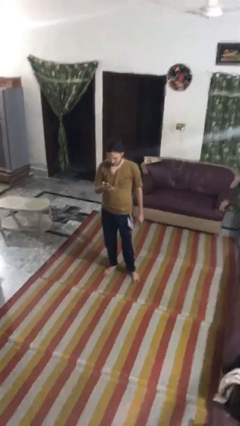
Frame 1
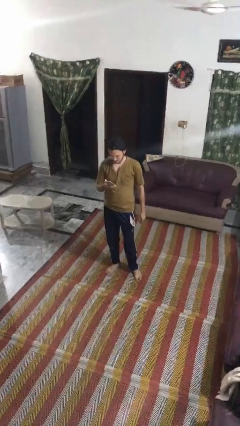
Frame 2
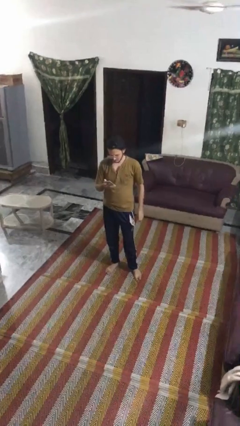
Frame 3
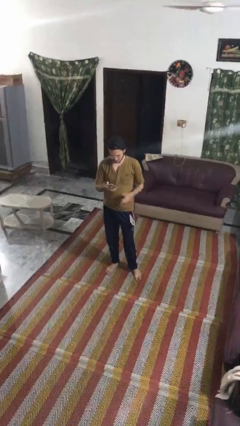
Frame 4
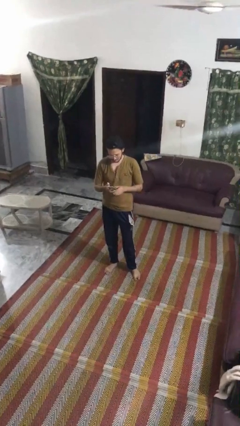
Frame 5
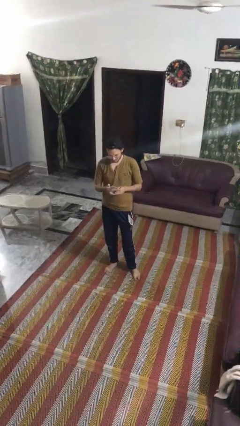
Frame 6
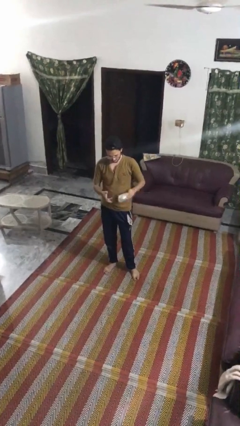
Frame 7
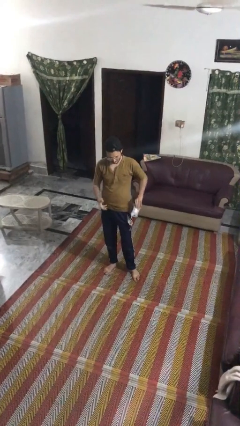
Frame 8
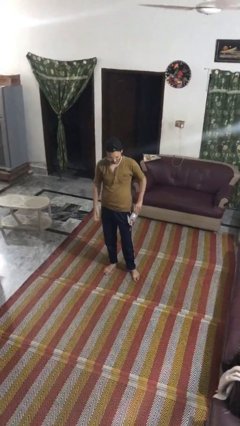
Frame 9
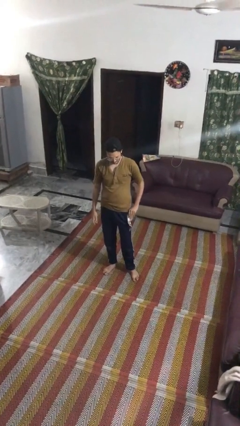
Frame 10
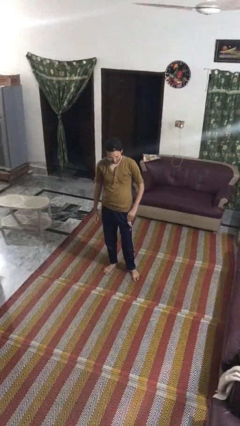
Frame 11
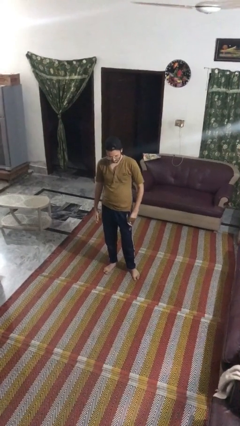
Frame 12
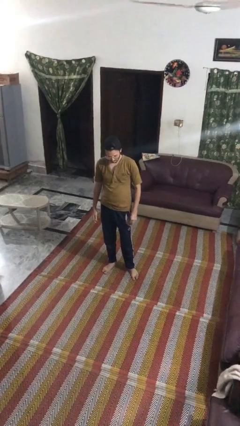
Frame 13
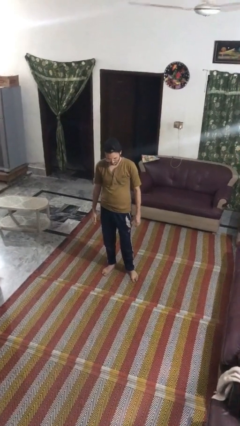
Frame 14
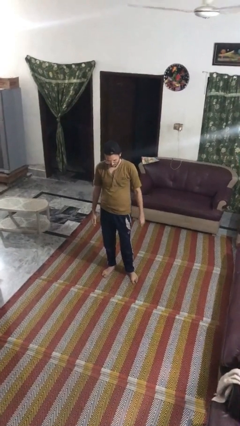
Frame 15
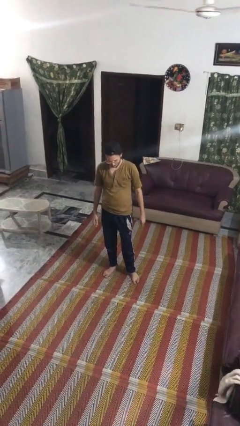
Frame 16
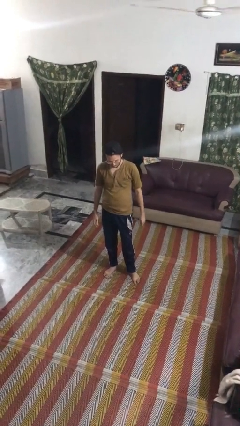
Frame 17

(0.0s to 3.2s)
person puts phone into pocket

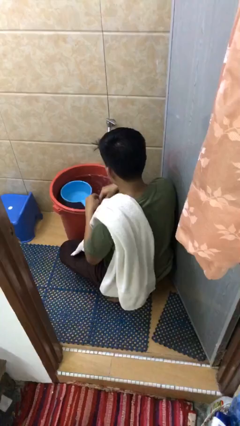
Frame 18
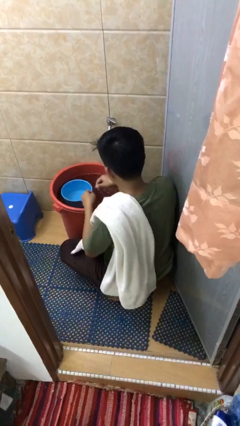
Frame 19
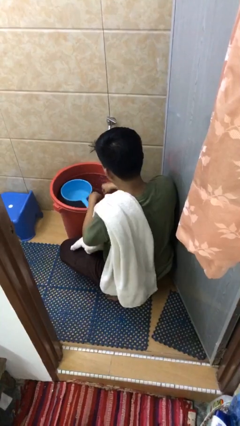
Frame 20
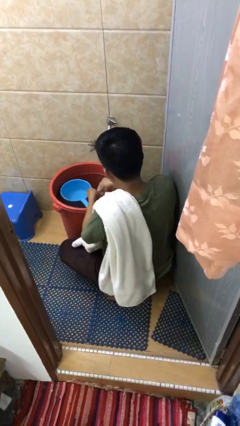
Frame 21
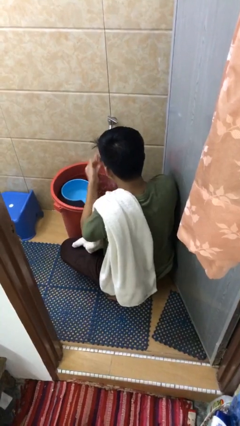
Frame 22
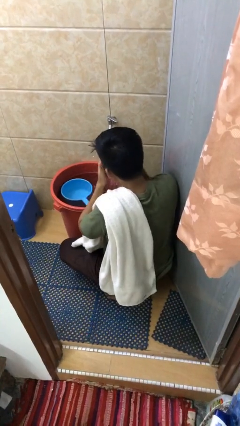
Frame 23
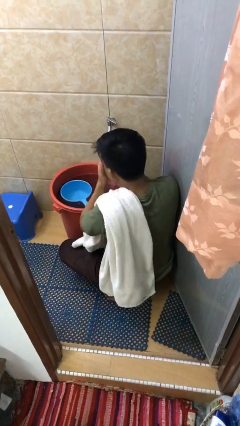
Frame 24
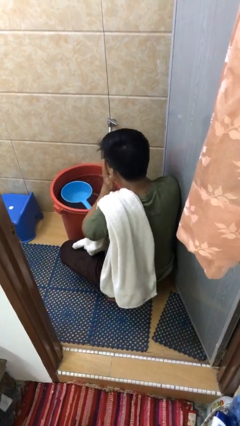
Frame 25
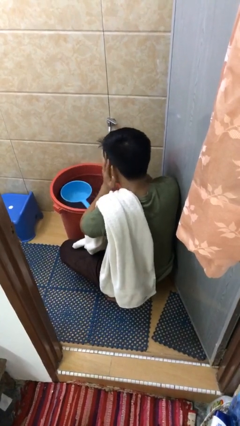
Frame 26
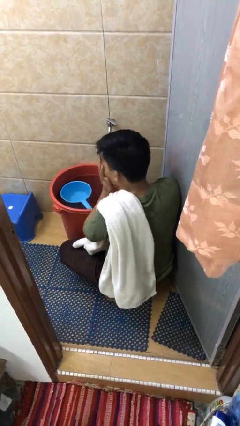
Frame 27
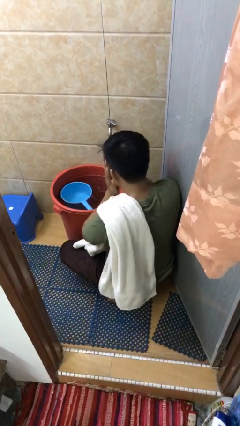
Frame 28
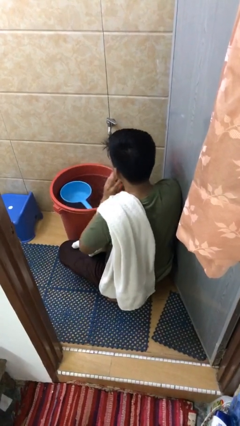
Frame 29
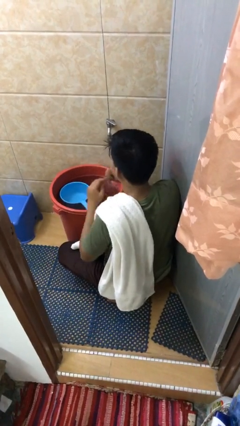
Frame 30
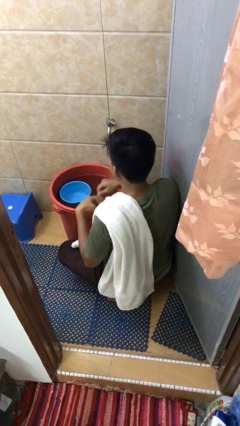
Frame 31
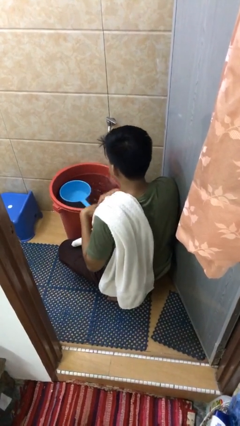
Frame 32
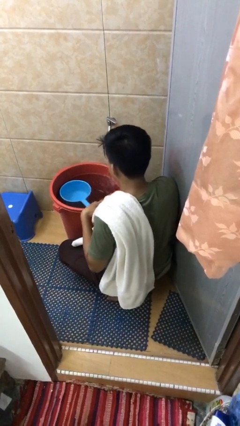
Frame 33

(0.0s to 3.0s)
person washes face

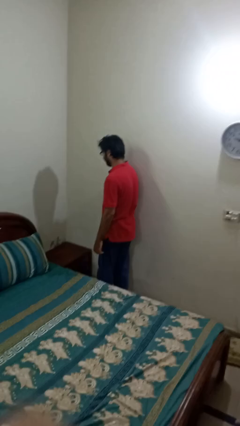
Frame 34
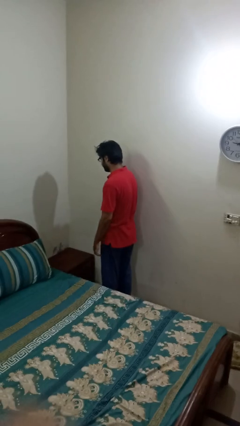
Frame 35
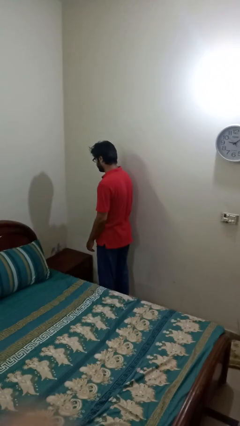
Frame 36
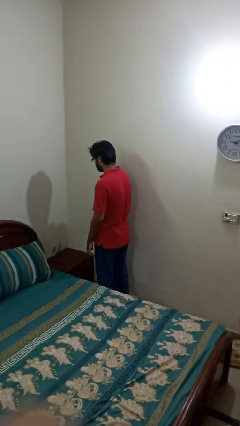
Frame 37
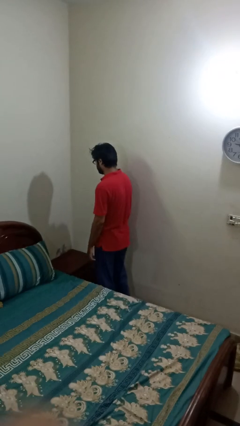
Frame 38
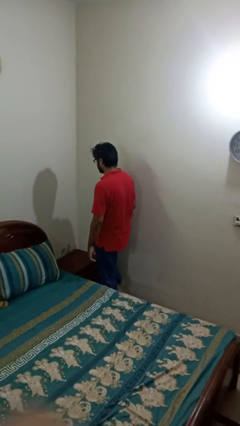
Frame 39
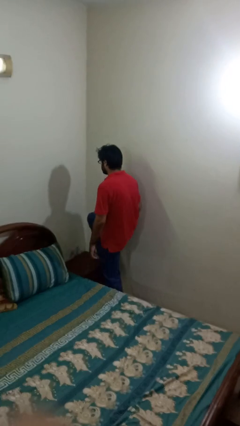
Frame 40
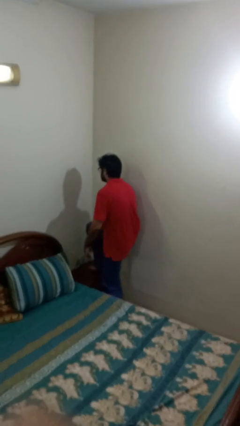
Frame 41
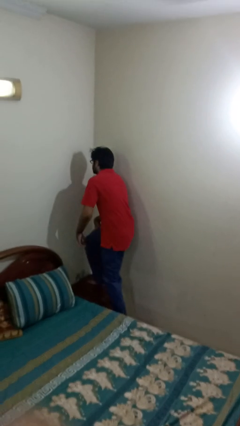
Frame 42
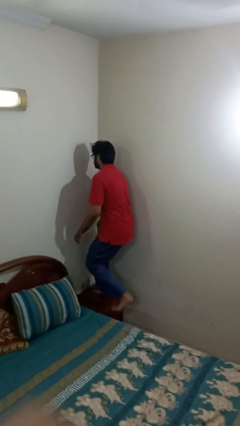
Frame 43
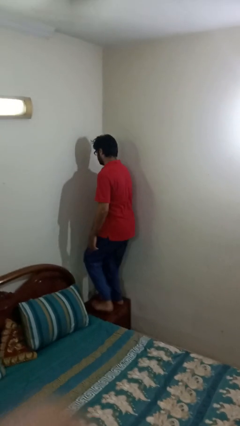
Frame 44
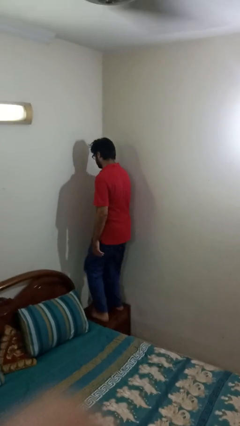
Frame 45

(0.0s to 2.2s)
person climbs on table

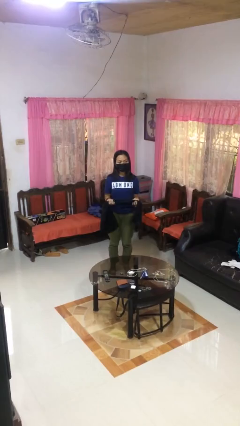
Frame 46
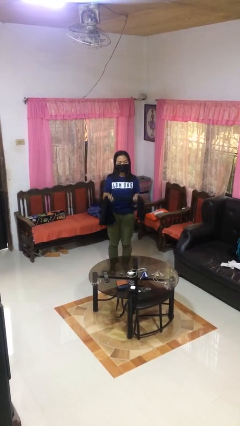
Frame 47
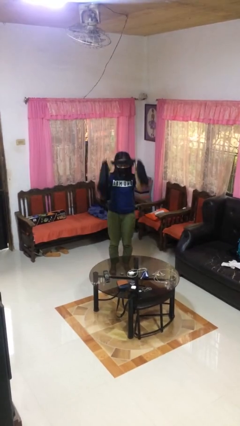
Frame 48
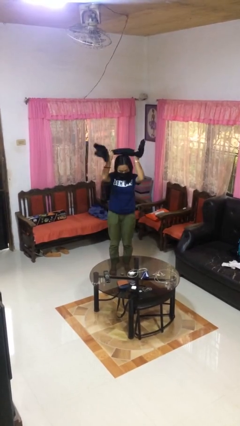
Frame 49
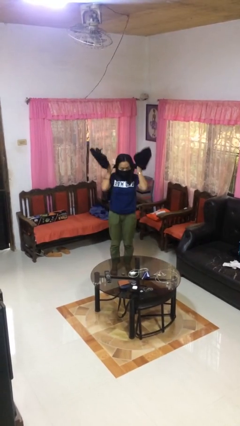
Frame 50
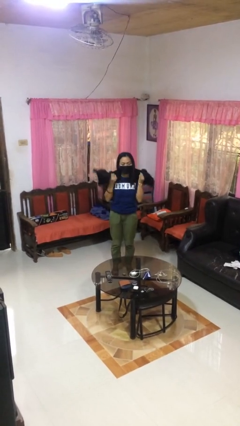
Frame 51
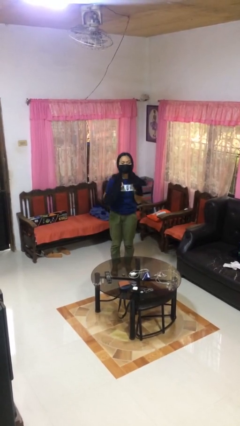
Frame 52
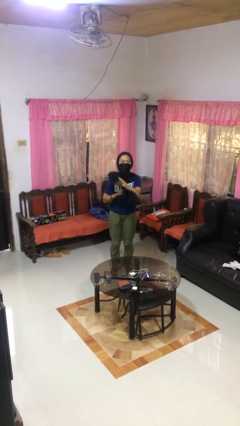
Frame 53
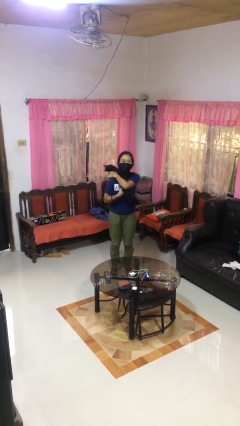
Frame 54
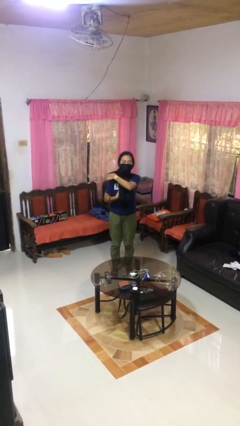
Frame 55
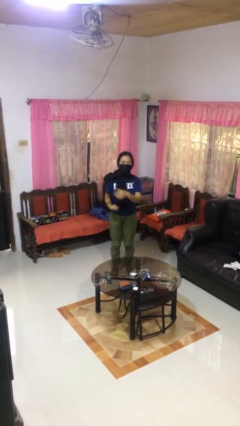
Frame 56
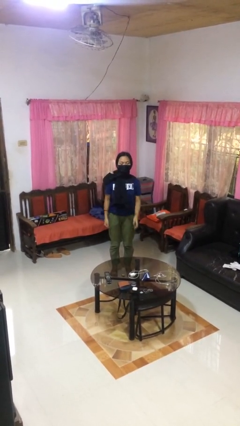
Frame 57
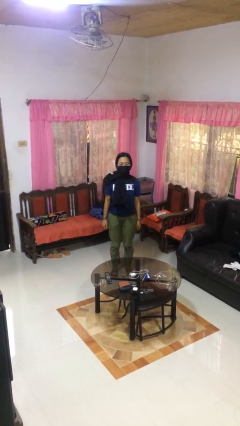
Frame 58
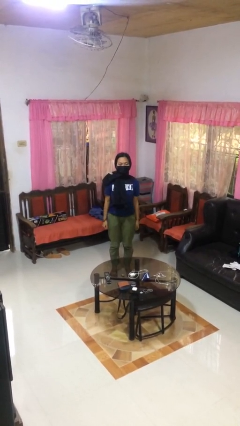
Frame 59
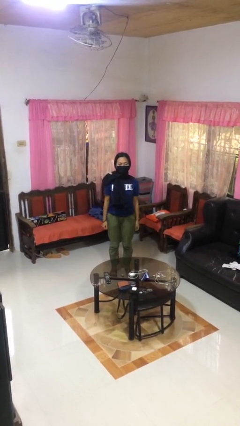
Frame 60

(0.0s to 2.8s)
person puts on scarf

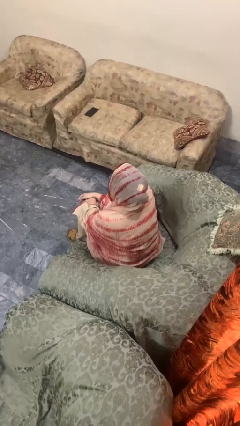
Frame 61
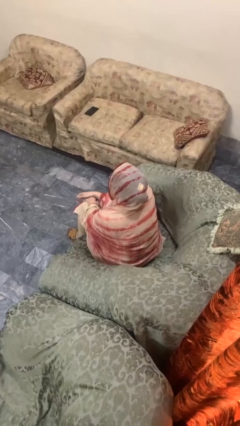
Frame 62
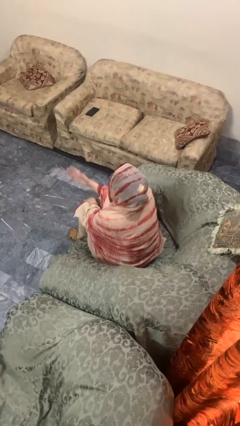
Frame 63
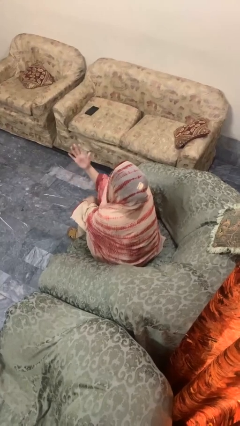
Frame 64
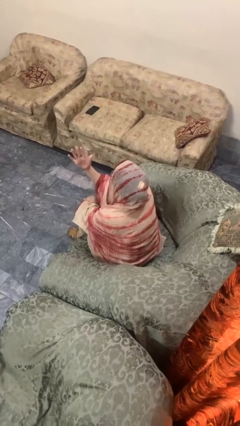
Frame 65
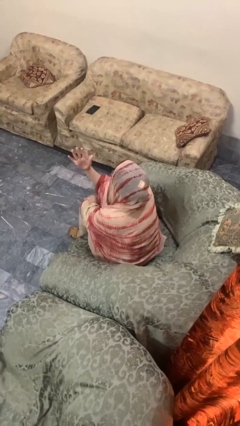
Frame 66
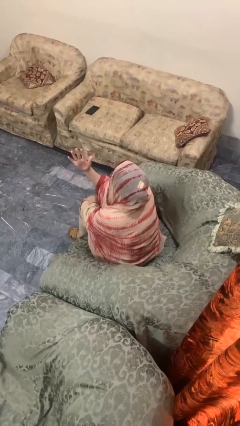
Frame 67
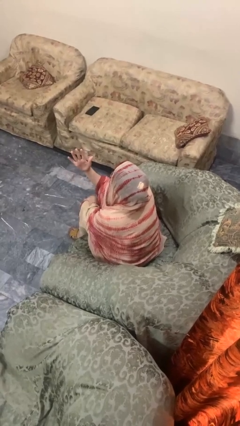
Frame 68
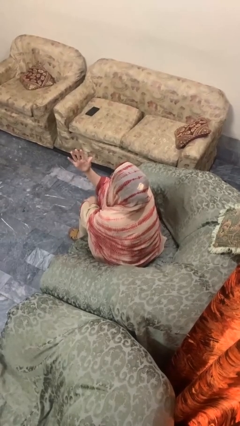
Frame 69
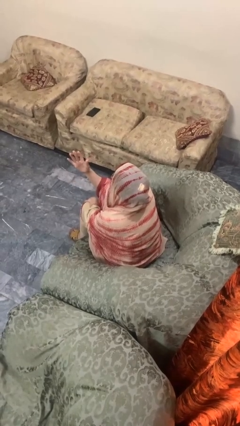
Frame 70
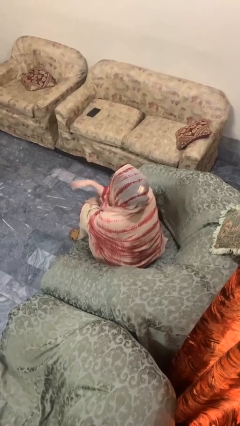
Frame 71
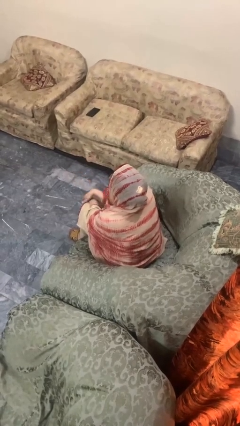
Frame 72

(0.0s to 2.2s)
person gestures number five

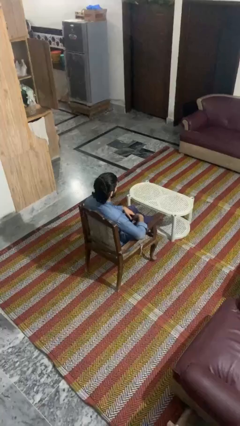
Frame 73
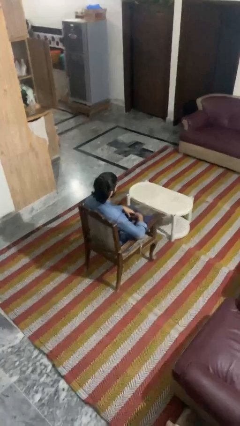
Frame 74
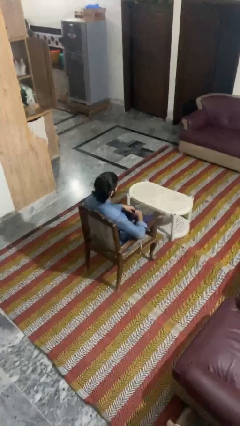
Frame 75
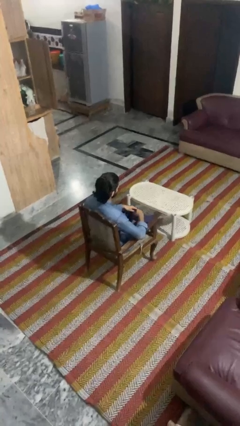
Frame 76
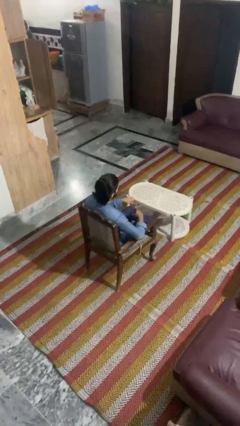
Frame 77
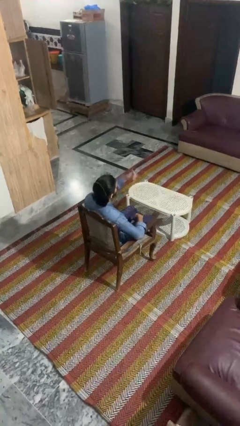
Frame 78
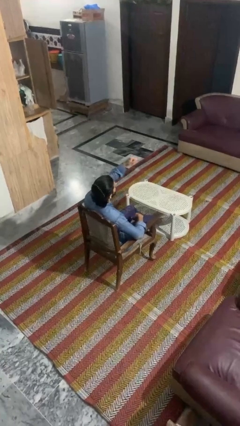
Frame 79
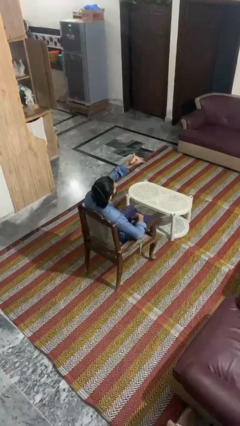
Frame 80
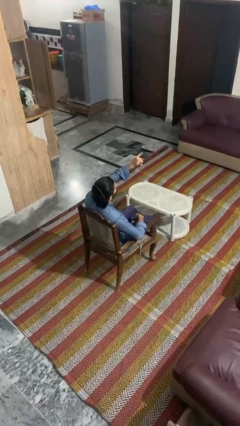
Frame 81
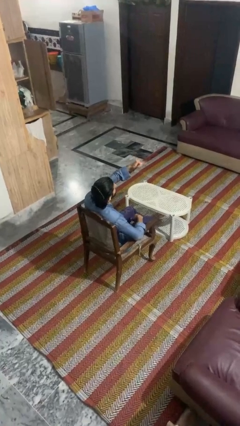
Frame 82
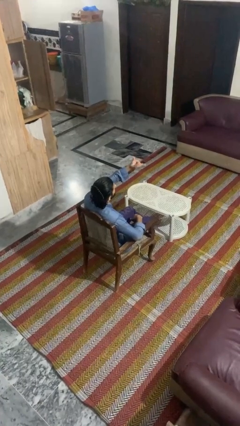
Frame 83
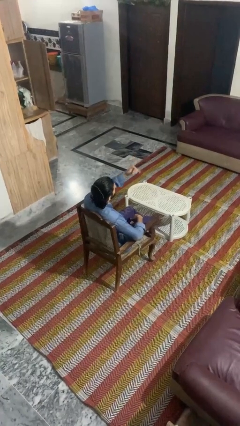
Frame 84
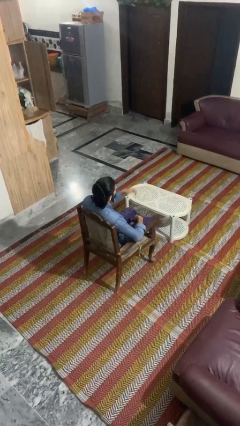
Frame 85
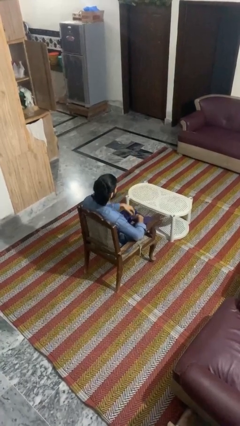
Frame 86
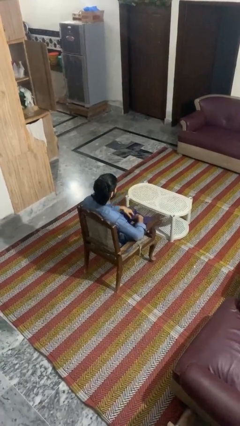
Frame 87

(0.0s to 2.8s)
person gestures hang loose

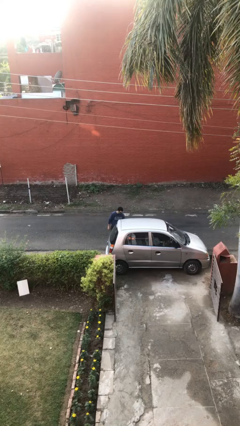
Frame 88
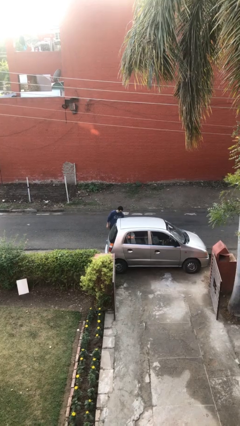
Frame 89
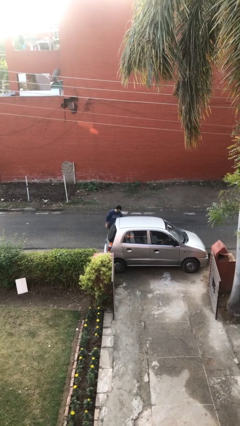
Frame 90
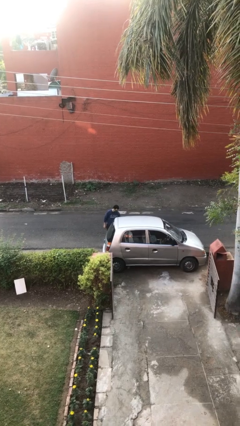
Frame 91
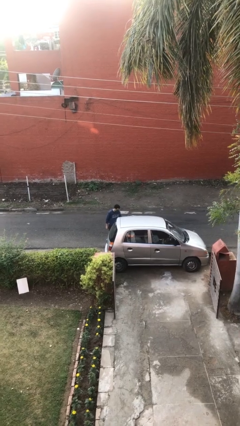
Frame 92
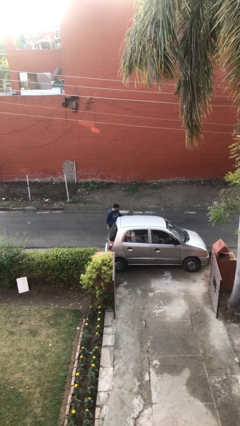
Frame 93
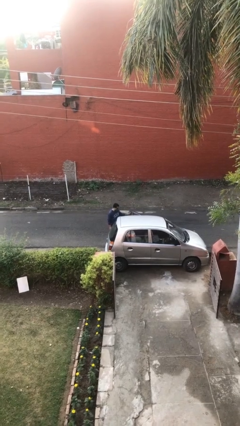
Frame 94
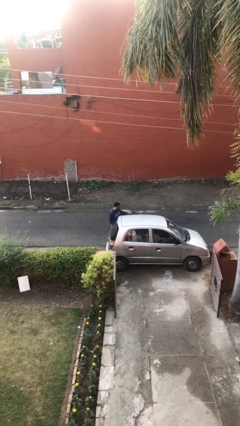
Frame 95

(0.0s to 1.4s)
person opens car door
